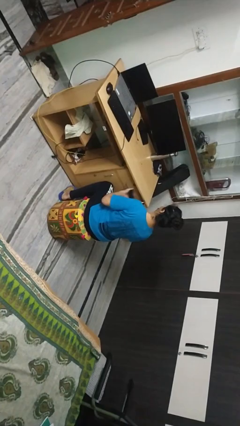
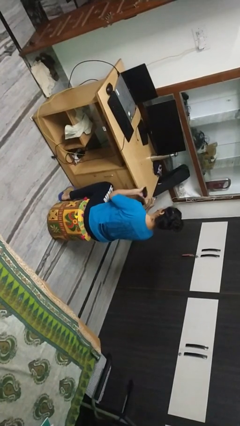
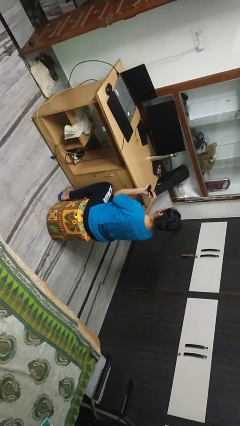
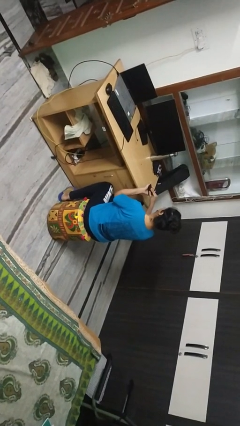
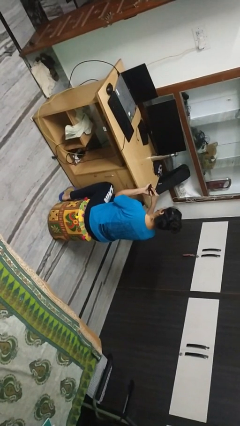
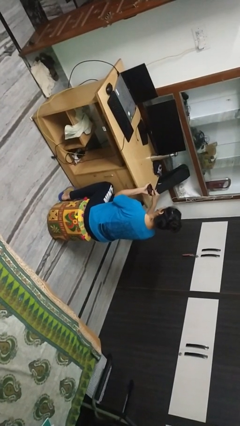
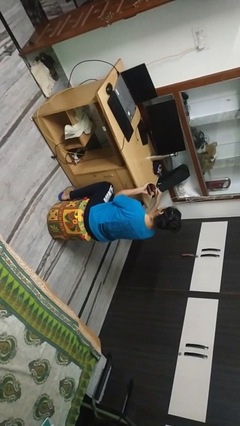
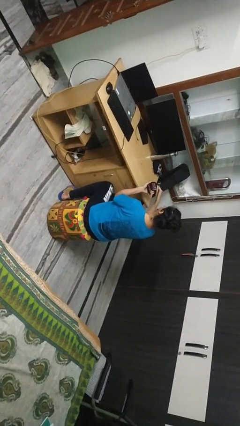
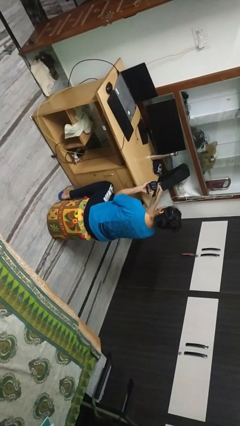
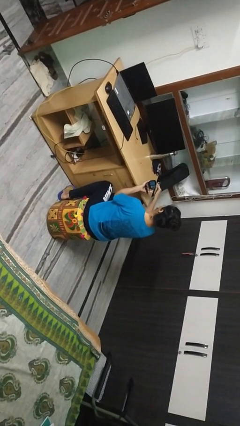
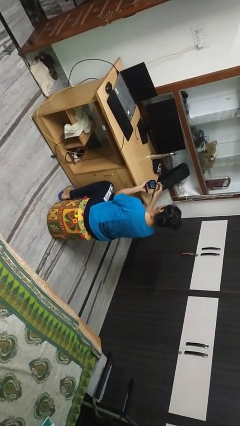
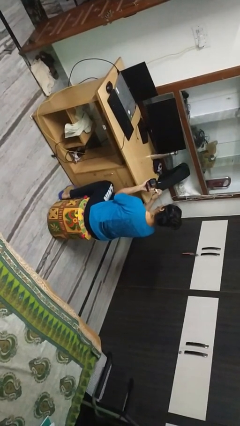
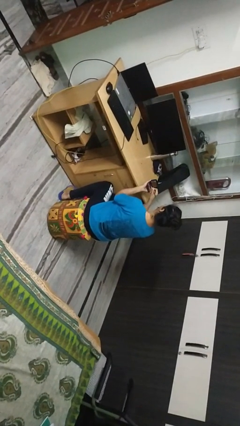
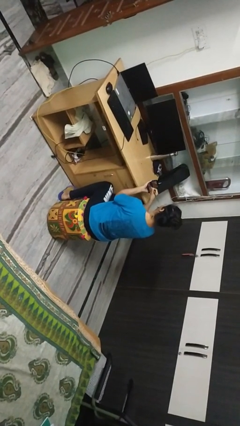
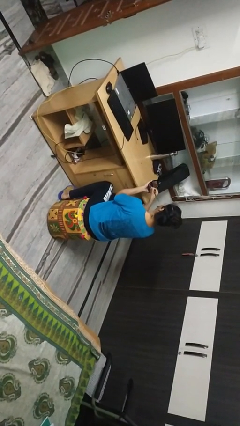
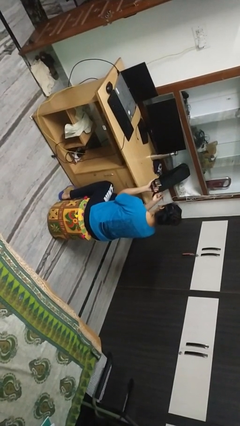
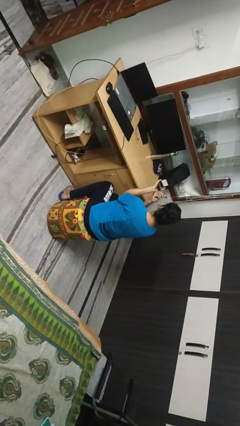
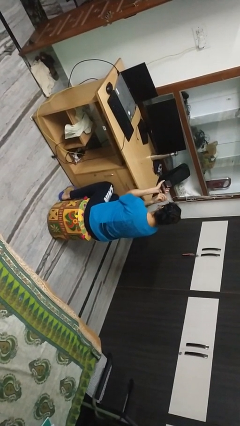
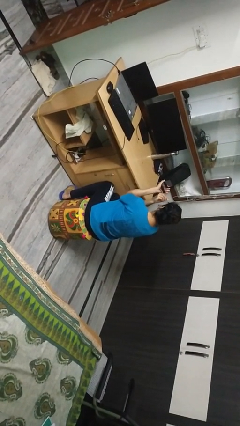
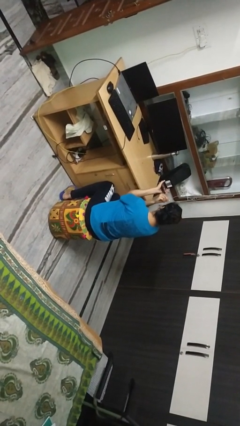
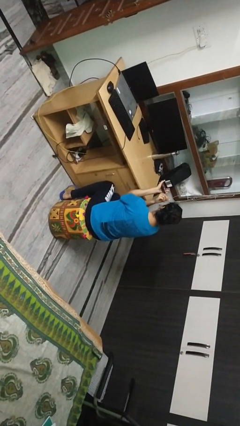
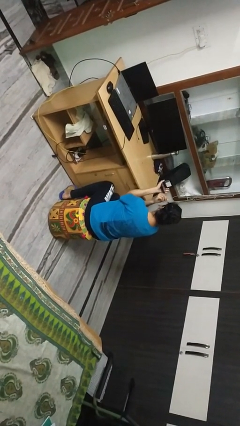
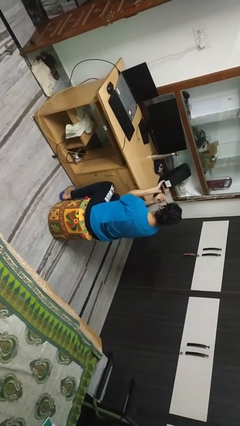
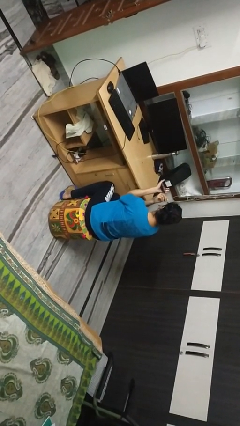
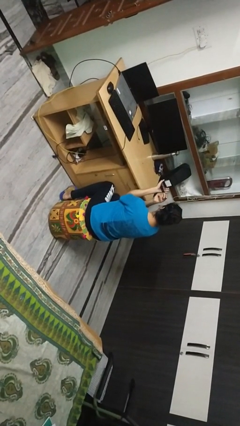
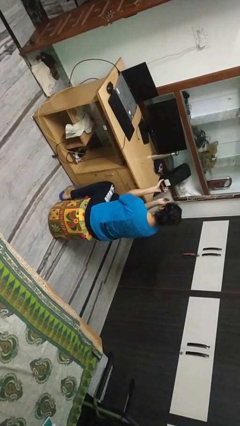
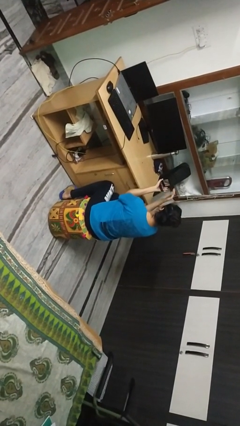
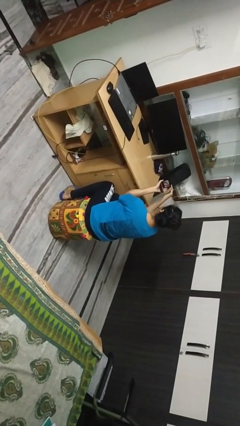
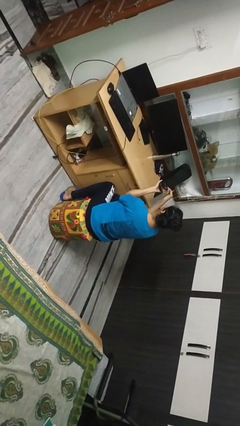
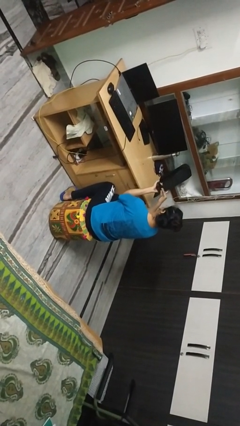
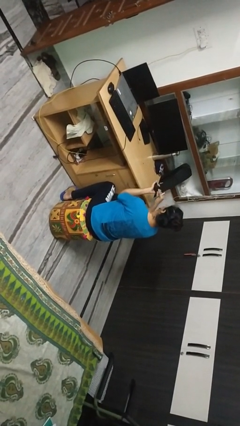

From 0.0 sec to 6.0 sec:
person applies eye makeup

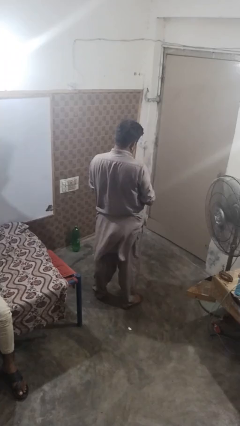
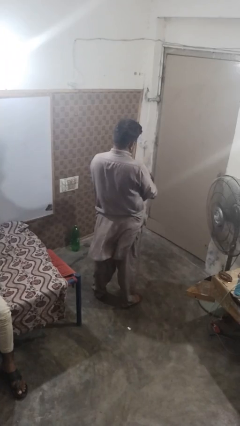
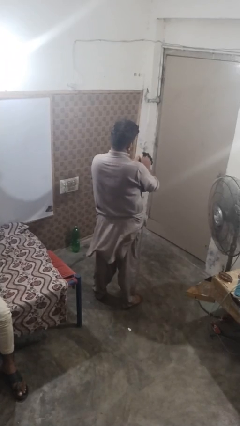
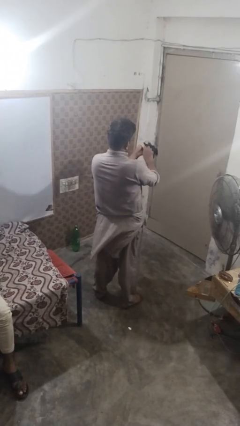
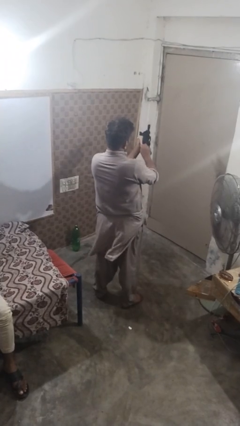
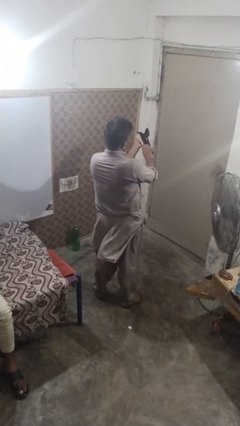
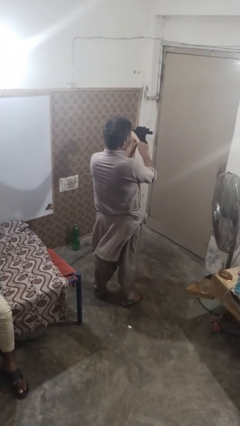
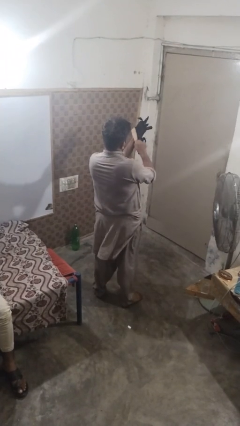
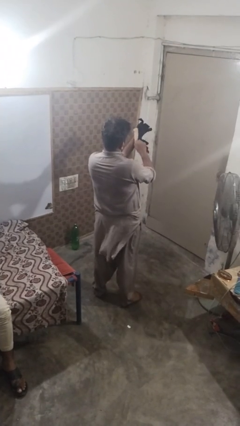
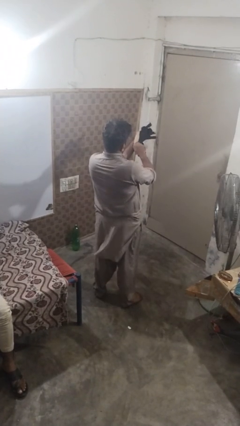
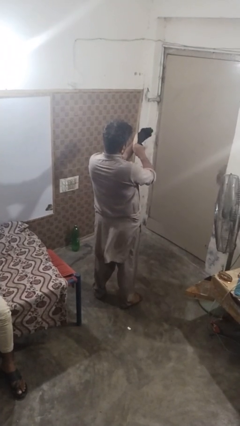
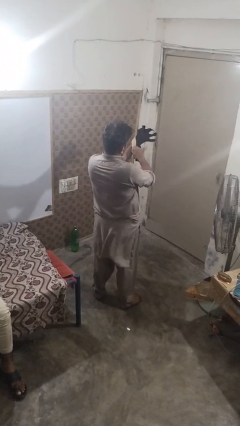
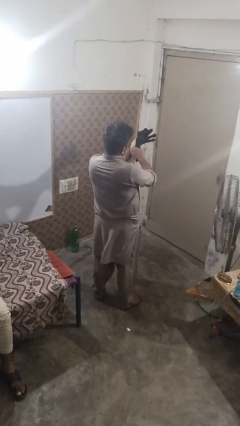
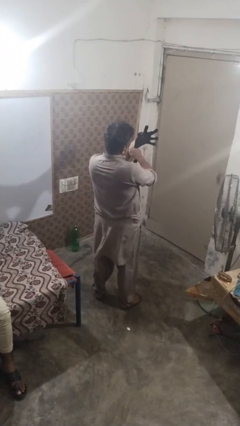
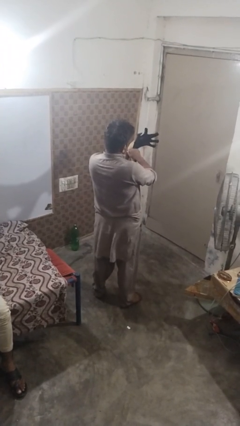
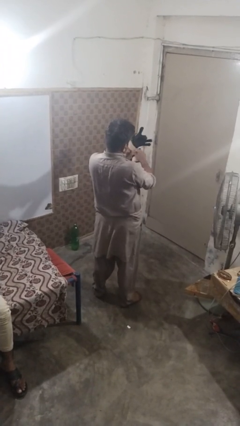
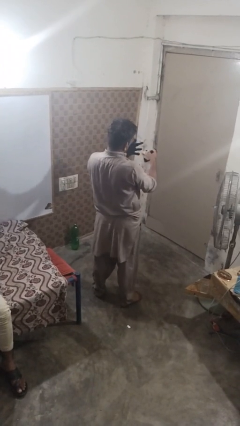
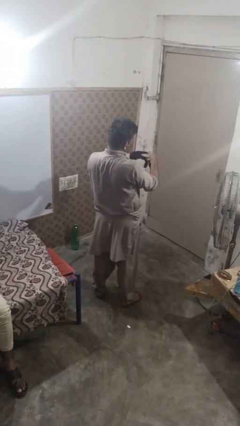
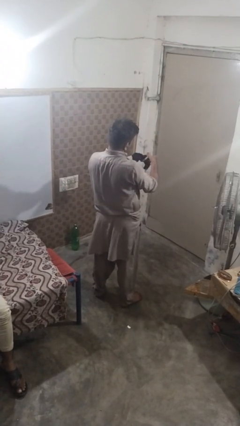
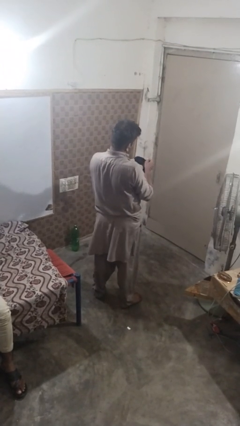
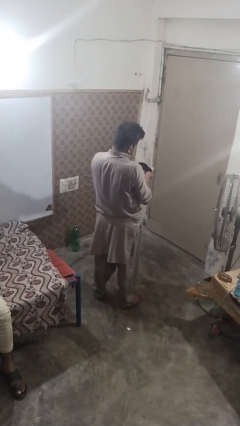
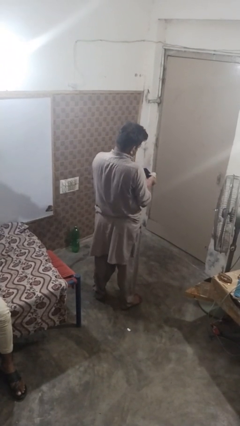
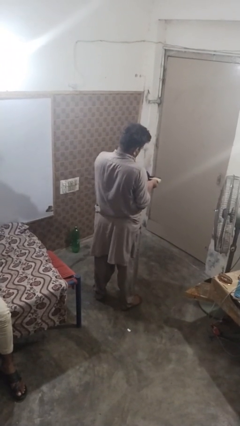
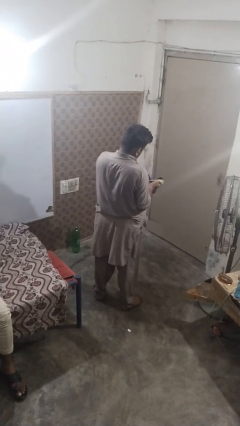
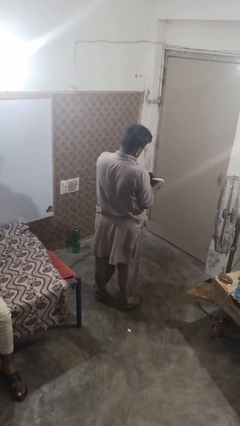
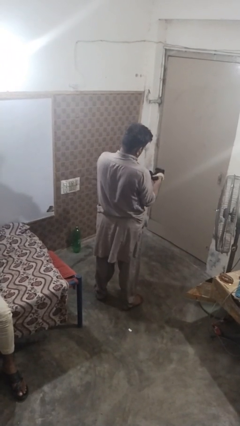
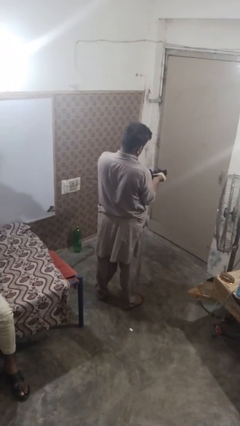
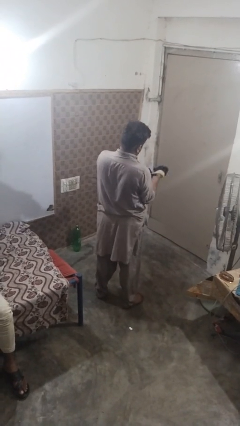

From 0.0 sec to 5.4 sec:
person puts on gloves

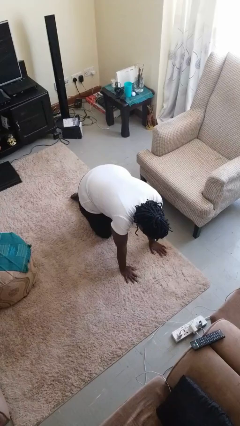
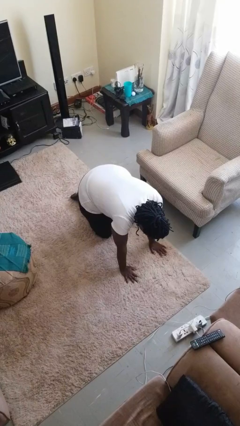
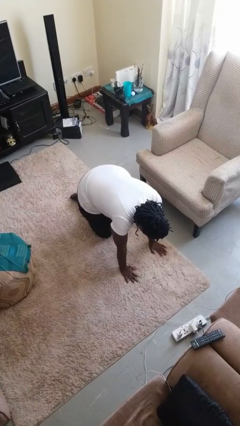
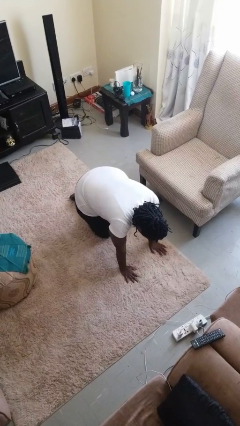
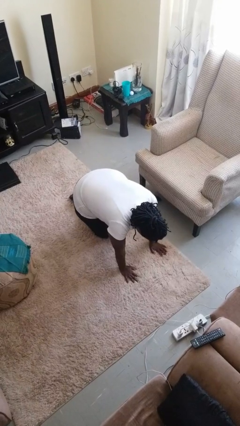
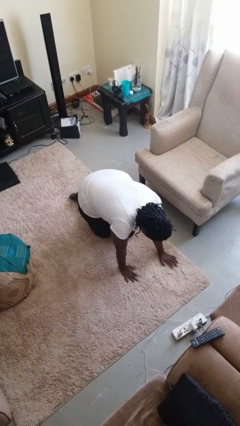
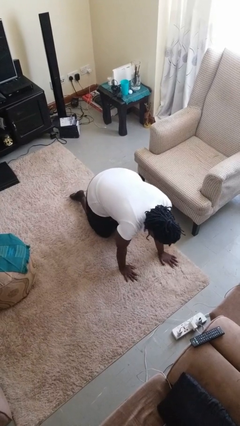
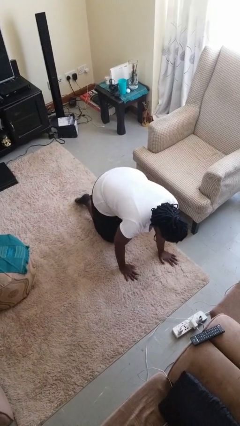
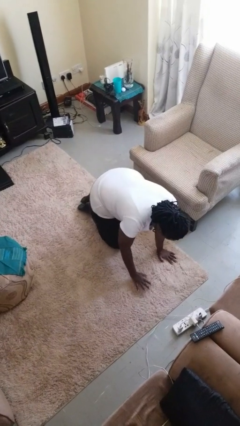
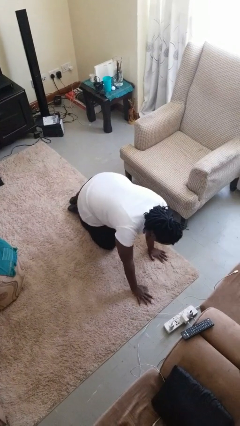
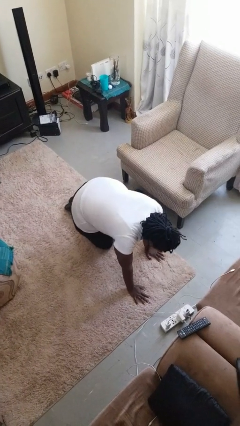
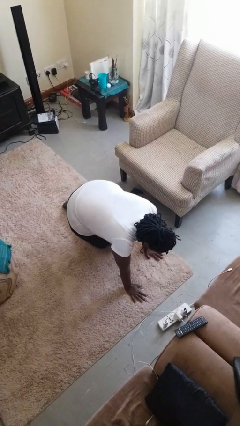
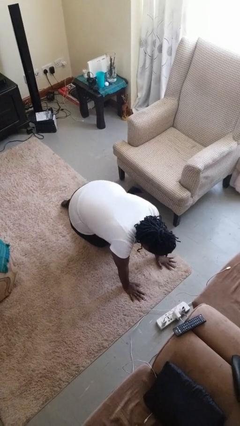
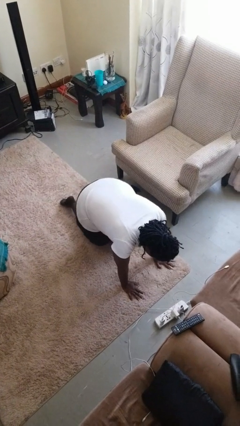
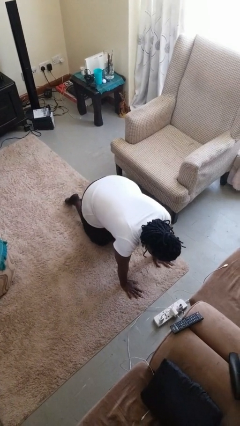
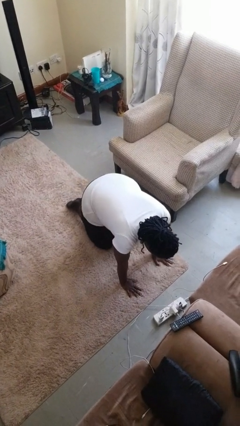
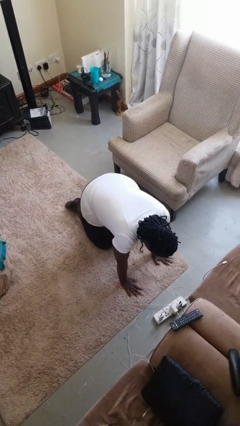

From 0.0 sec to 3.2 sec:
person crawls

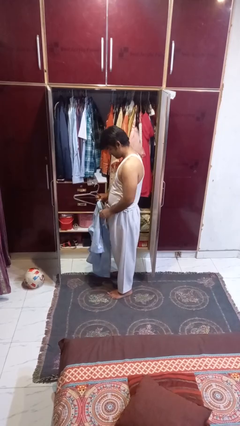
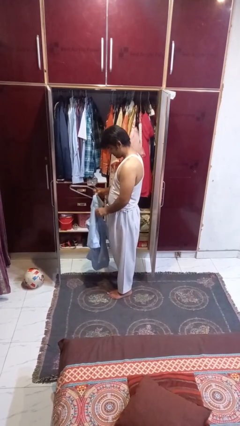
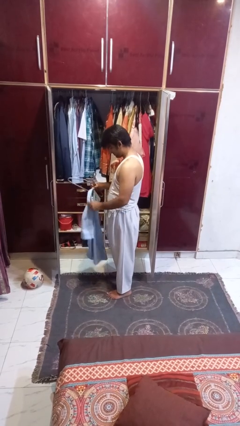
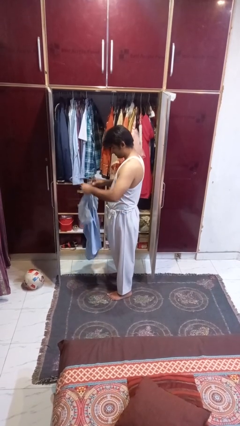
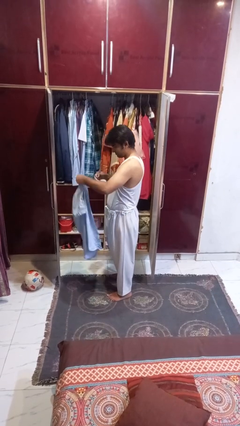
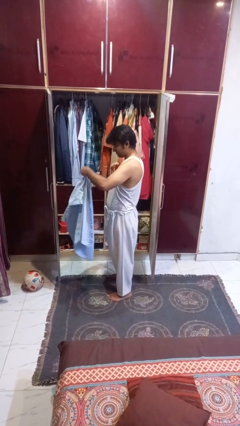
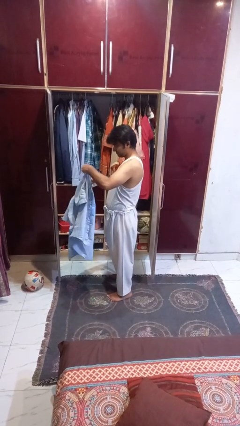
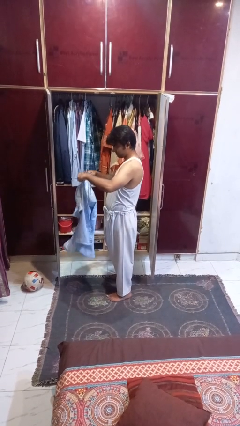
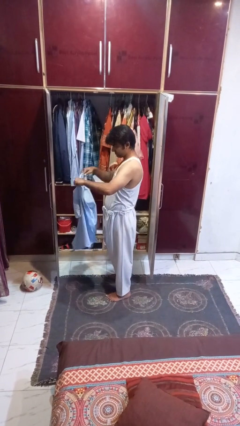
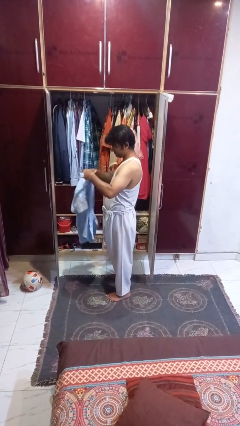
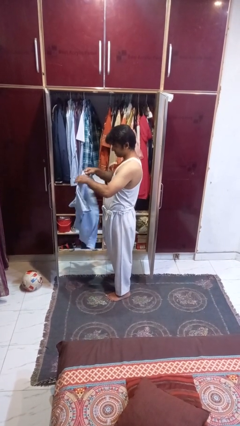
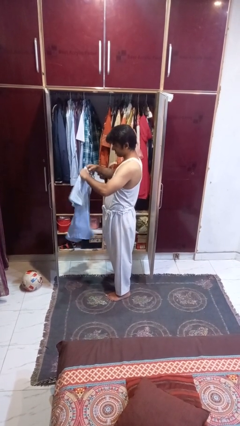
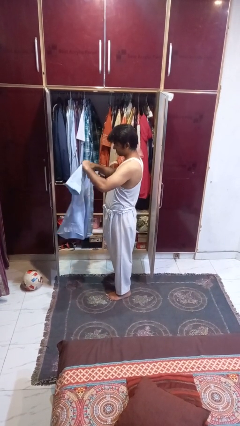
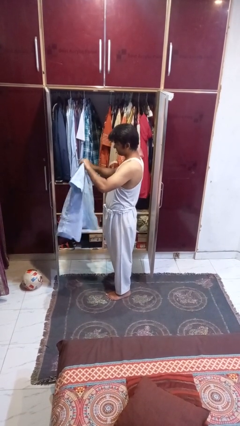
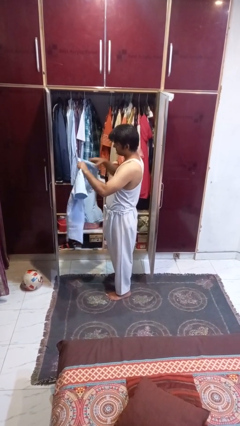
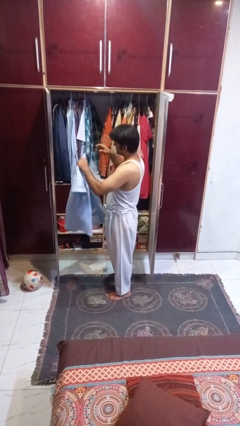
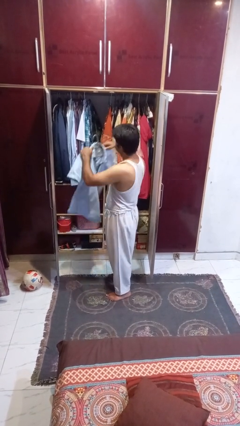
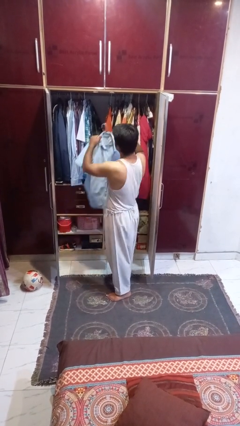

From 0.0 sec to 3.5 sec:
person puts clothes into closet
